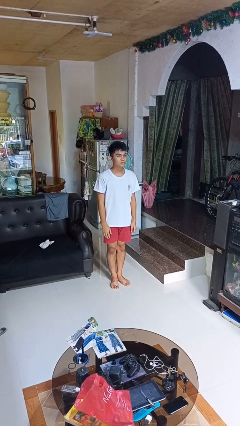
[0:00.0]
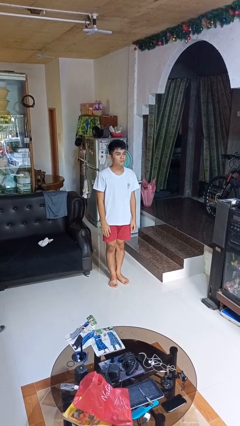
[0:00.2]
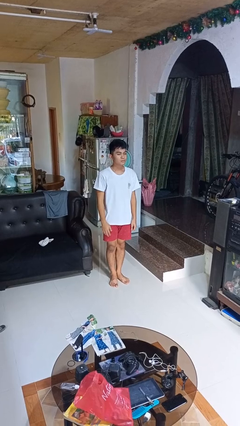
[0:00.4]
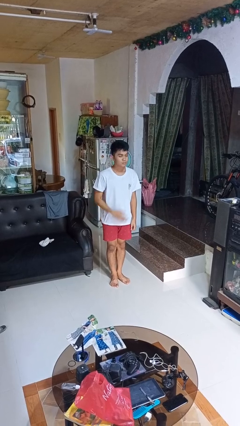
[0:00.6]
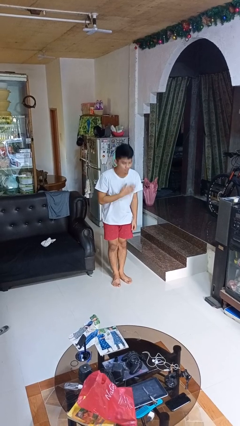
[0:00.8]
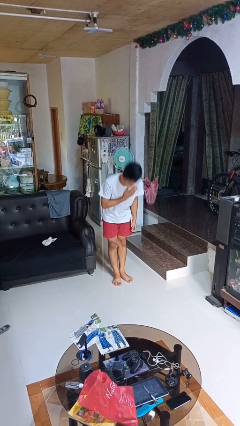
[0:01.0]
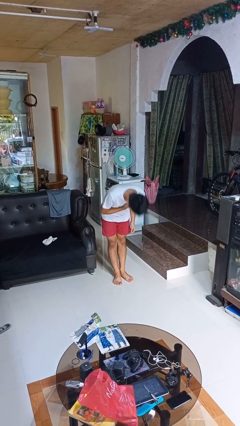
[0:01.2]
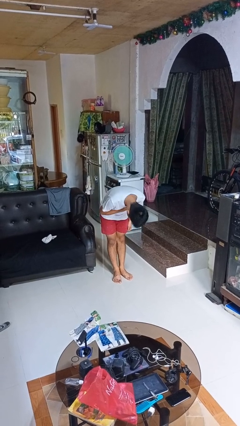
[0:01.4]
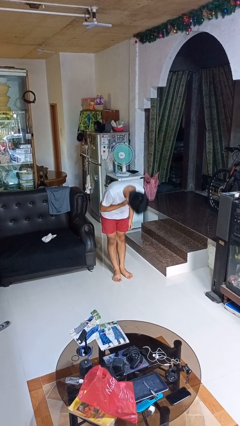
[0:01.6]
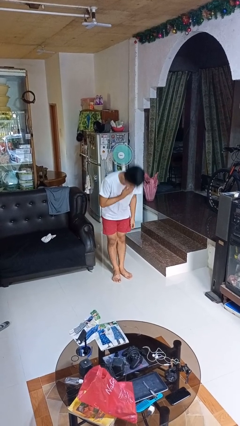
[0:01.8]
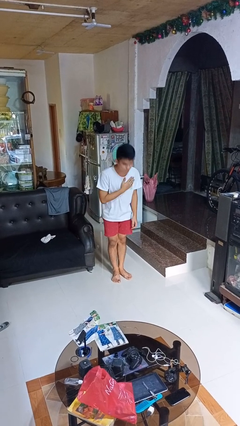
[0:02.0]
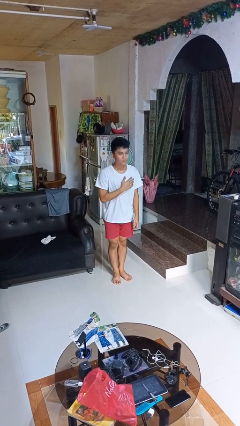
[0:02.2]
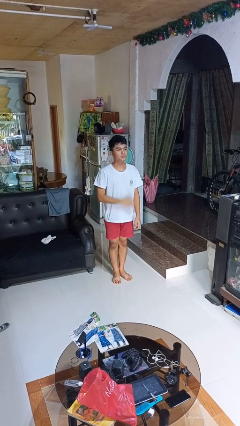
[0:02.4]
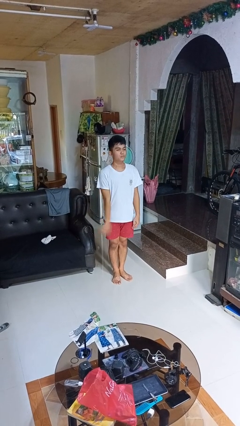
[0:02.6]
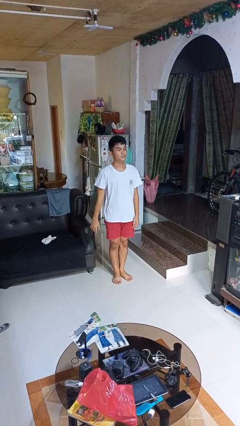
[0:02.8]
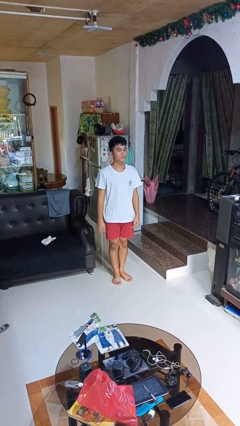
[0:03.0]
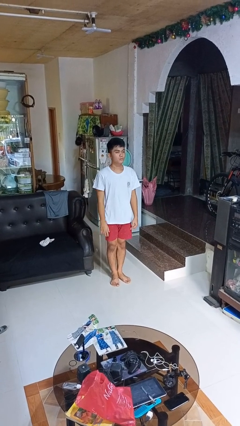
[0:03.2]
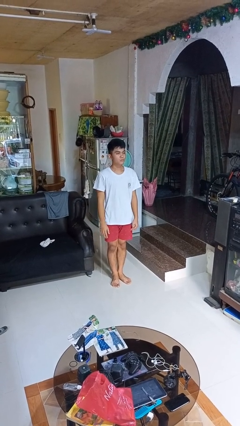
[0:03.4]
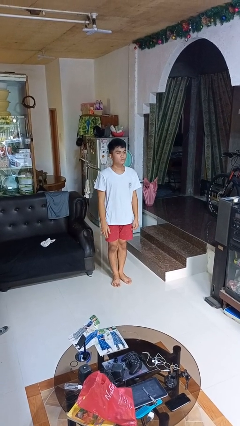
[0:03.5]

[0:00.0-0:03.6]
person bows

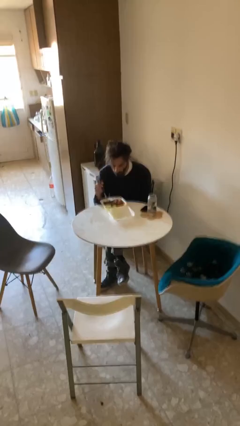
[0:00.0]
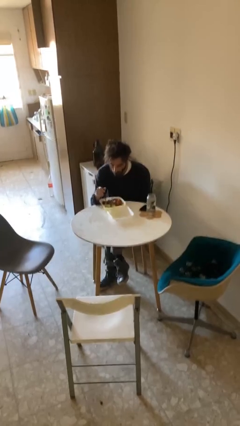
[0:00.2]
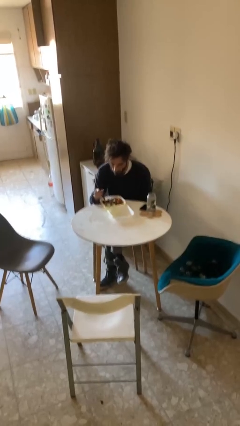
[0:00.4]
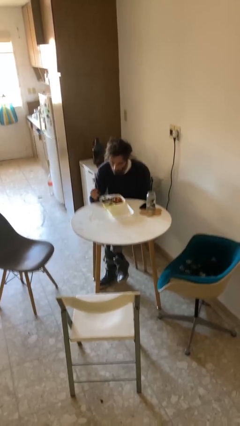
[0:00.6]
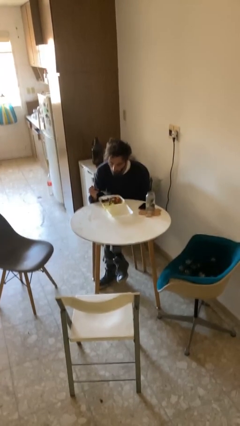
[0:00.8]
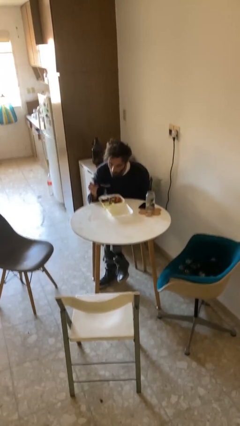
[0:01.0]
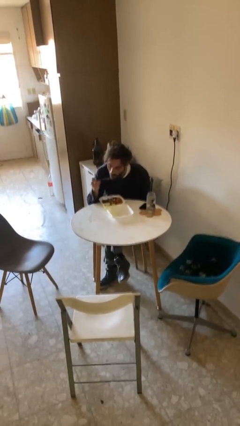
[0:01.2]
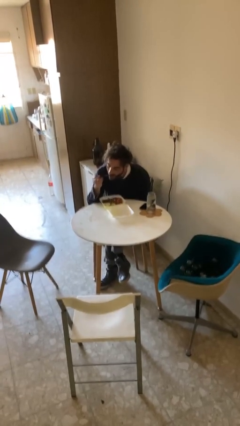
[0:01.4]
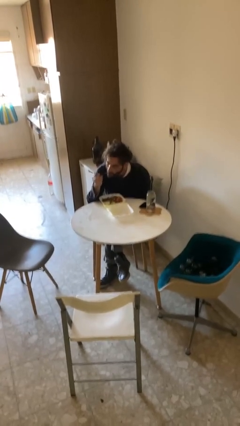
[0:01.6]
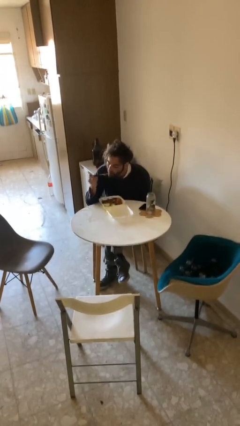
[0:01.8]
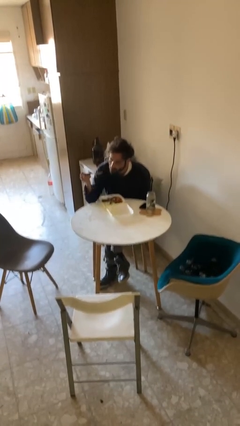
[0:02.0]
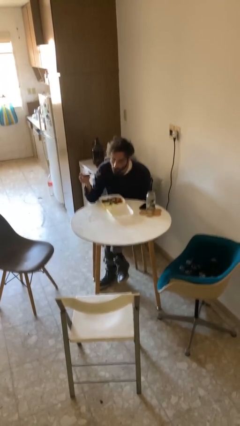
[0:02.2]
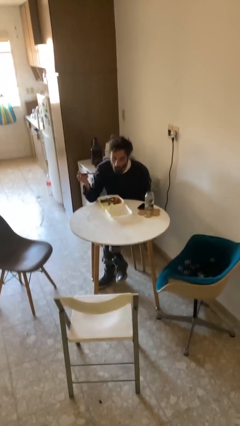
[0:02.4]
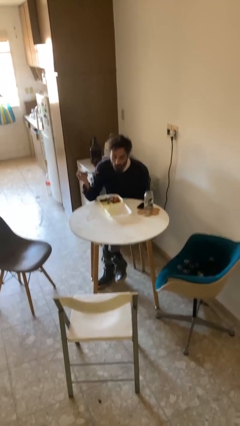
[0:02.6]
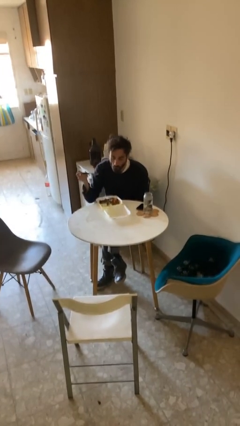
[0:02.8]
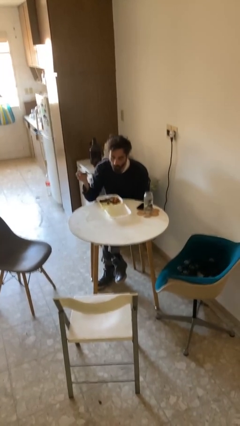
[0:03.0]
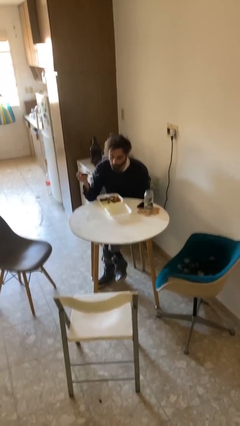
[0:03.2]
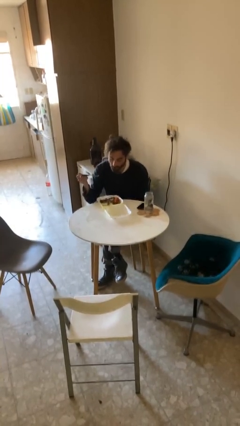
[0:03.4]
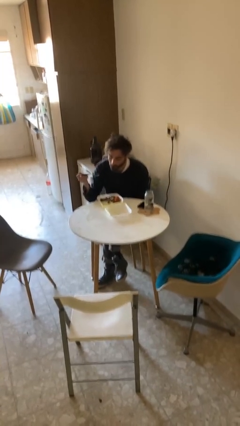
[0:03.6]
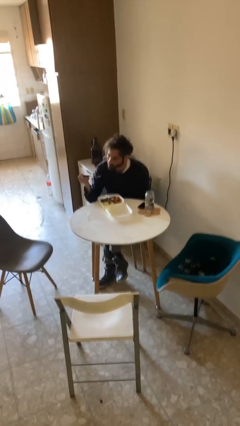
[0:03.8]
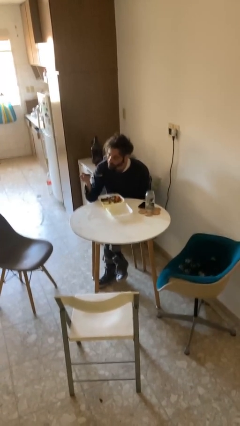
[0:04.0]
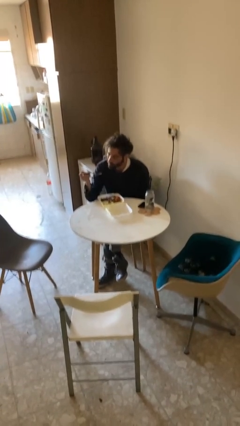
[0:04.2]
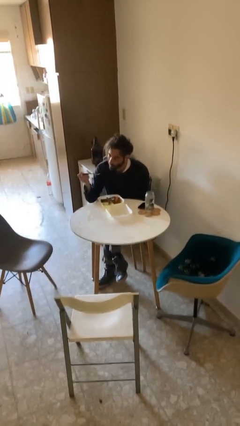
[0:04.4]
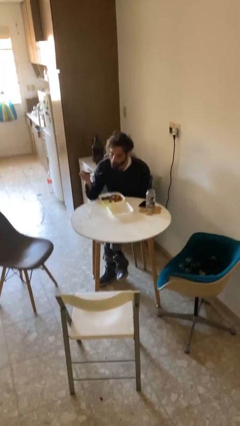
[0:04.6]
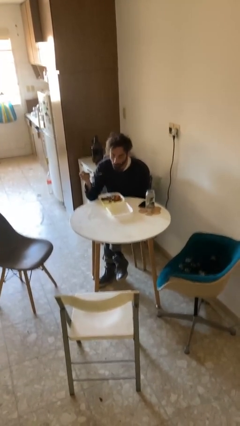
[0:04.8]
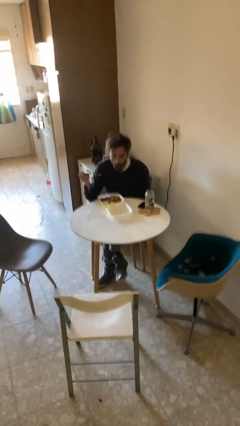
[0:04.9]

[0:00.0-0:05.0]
person eats with utensil

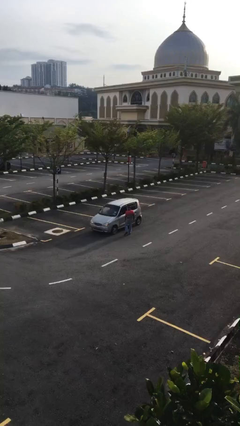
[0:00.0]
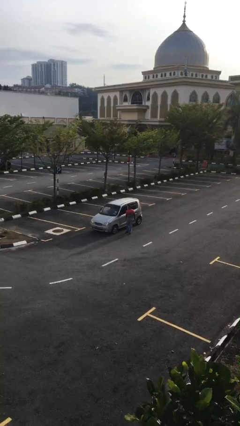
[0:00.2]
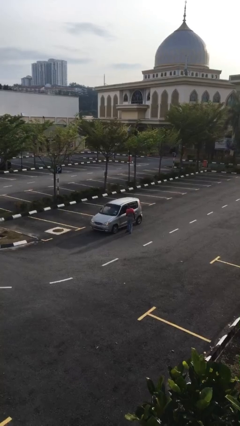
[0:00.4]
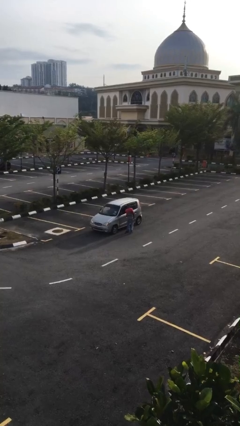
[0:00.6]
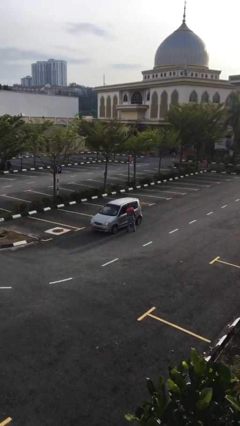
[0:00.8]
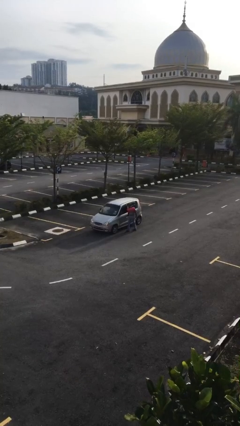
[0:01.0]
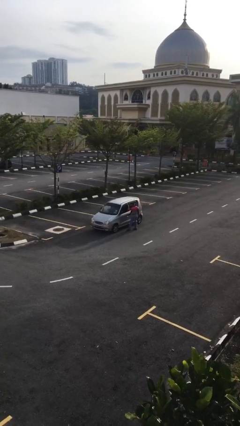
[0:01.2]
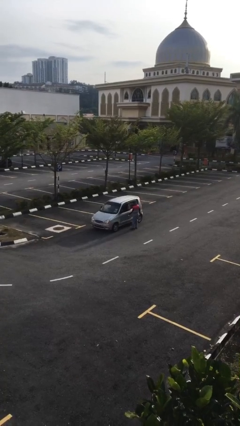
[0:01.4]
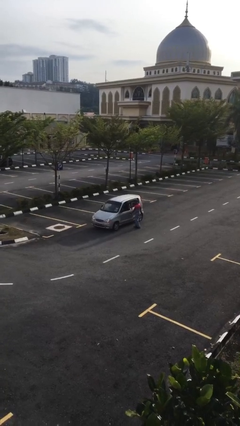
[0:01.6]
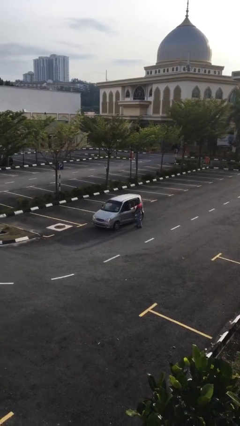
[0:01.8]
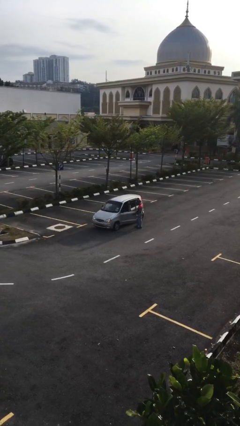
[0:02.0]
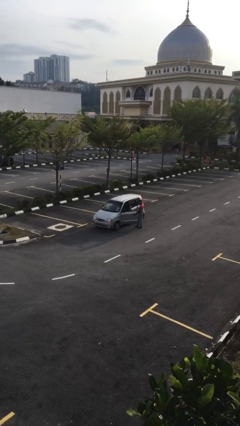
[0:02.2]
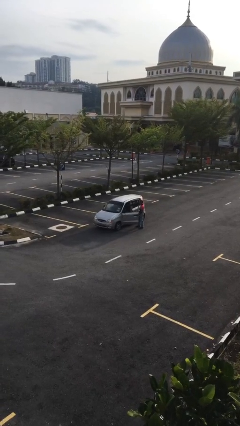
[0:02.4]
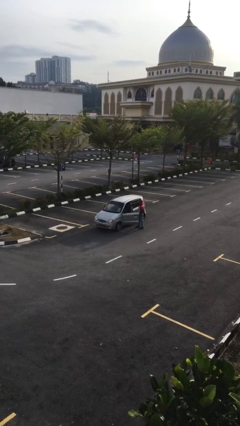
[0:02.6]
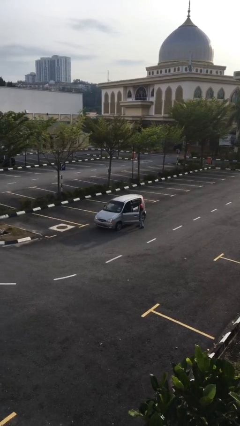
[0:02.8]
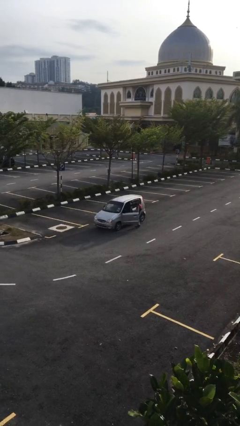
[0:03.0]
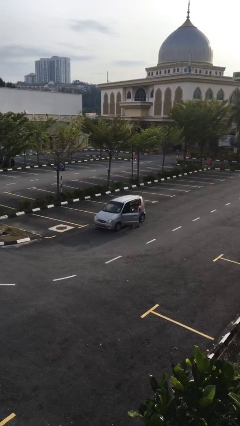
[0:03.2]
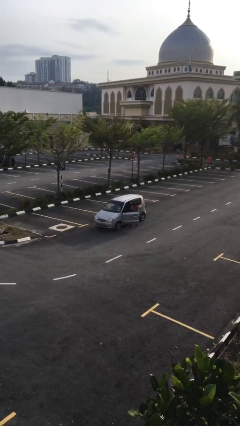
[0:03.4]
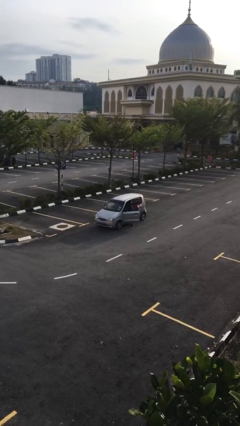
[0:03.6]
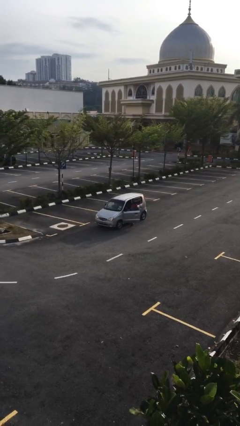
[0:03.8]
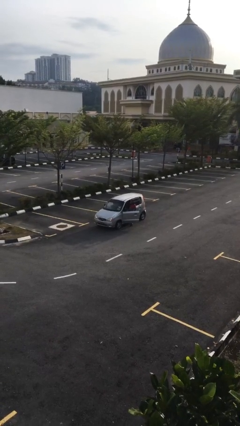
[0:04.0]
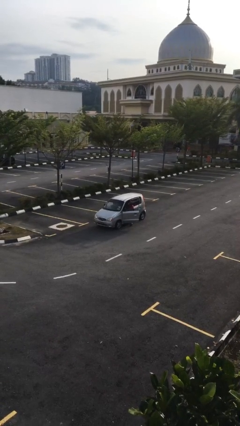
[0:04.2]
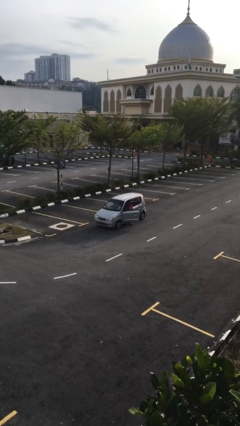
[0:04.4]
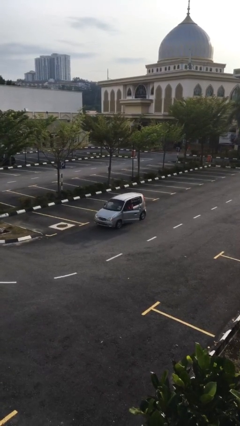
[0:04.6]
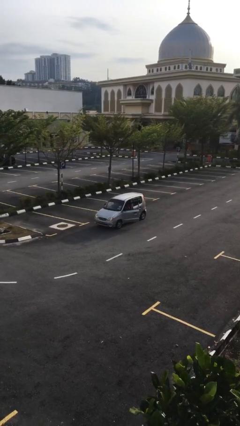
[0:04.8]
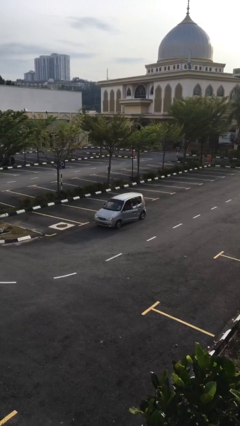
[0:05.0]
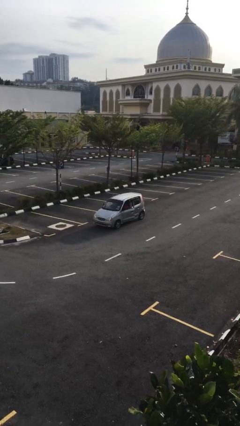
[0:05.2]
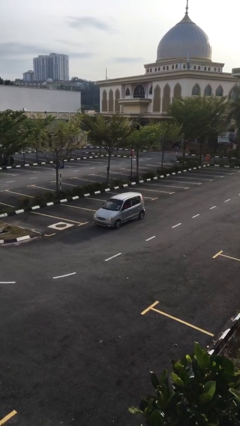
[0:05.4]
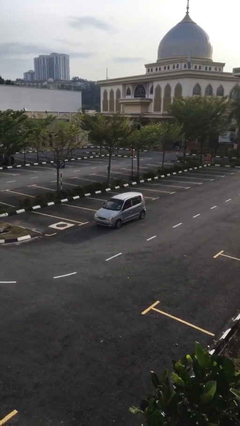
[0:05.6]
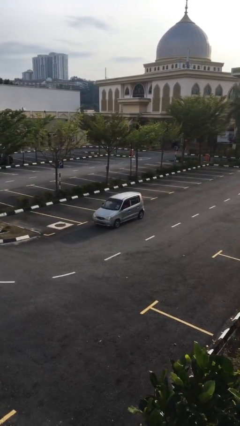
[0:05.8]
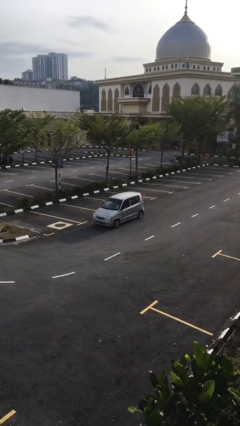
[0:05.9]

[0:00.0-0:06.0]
car picks up person

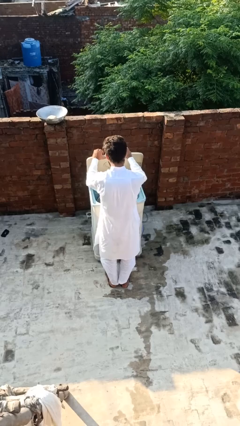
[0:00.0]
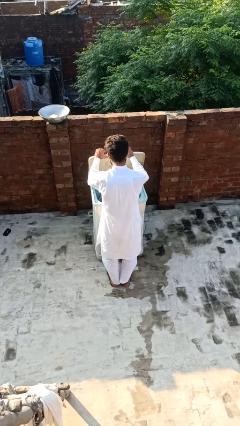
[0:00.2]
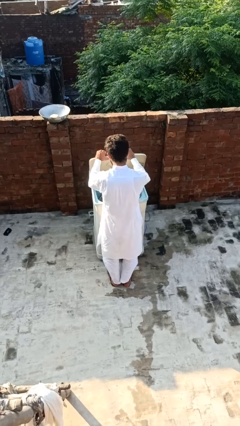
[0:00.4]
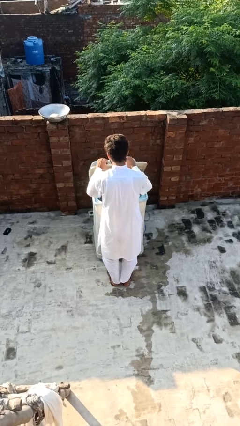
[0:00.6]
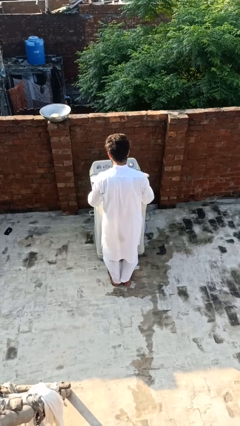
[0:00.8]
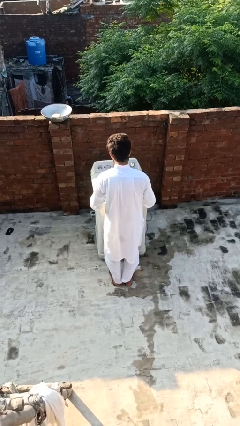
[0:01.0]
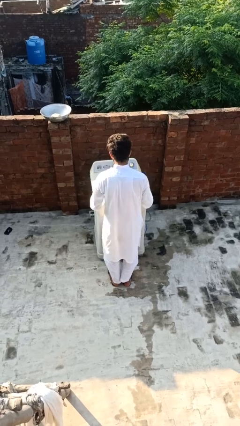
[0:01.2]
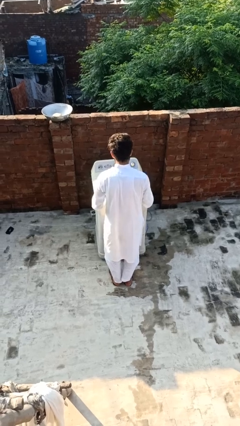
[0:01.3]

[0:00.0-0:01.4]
person closes clothes washer

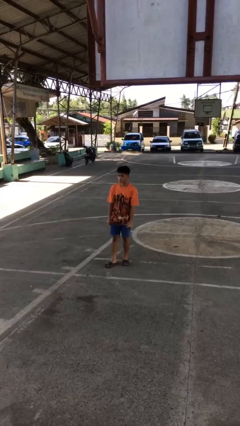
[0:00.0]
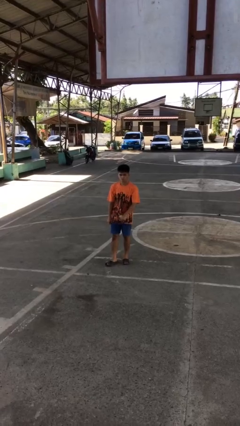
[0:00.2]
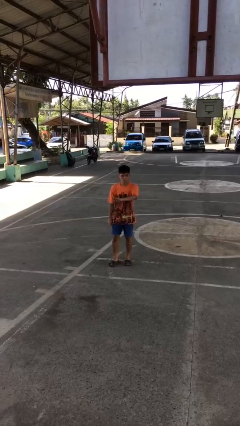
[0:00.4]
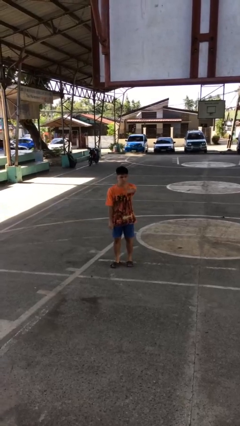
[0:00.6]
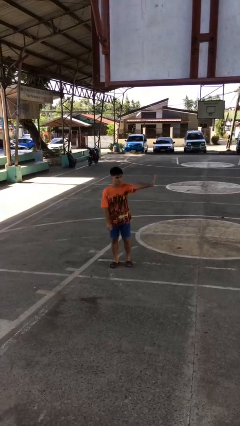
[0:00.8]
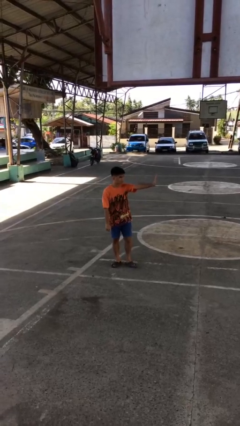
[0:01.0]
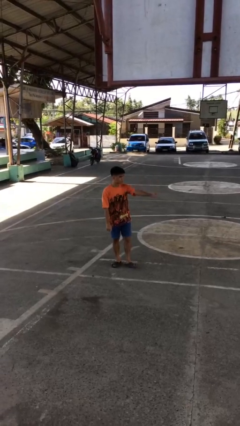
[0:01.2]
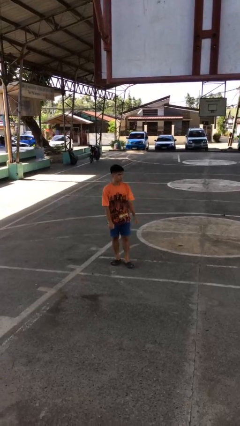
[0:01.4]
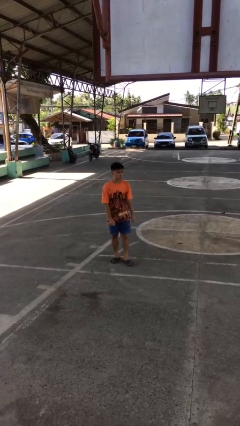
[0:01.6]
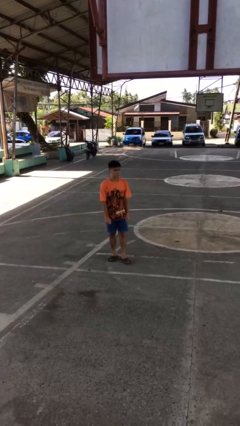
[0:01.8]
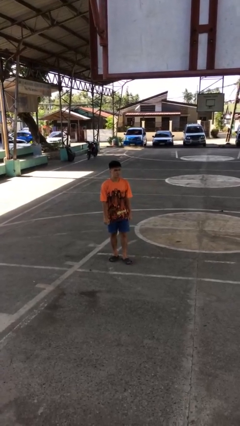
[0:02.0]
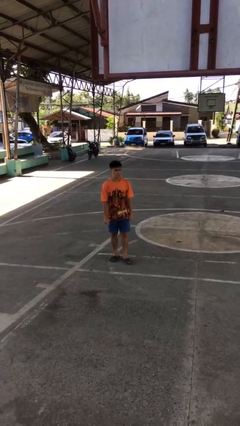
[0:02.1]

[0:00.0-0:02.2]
person gestures swipe left
